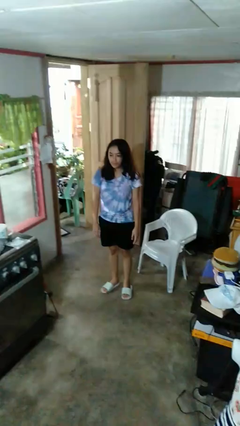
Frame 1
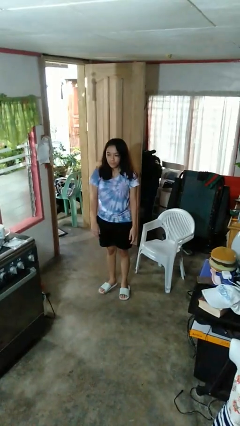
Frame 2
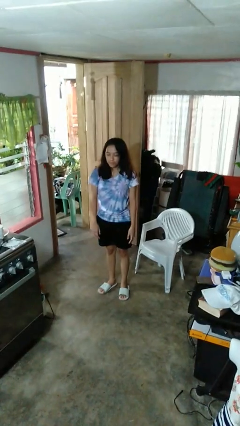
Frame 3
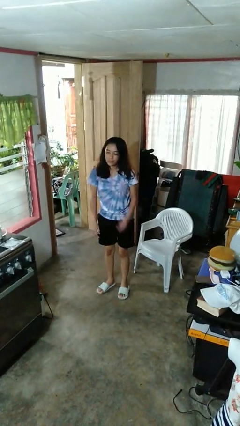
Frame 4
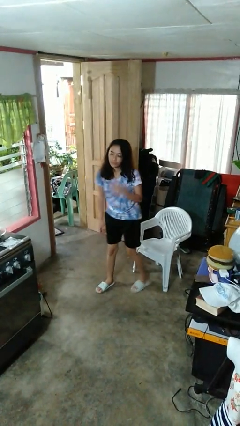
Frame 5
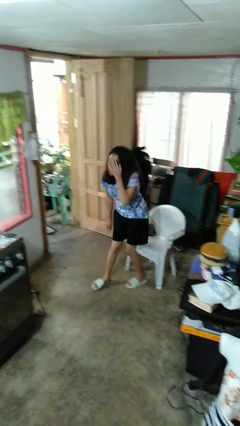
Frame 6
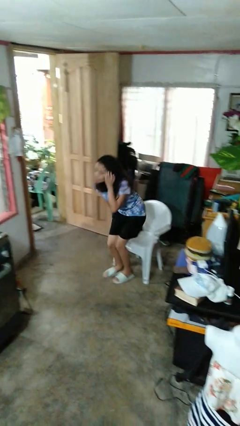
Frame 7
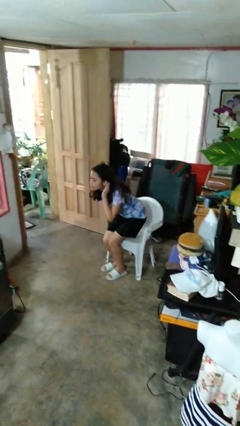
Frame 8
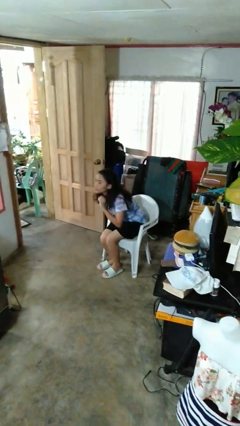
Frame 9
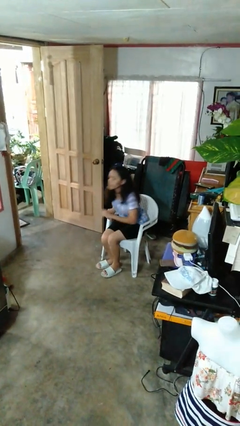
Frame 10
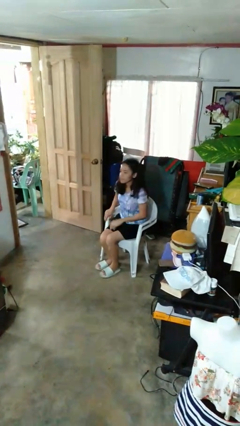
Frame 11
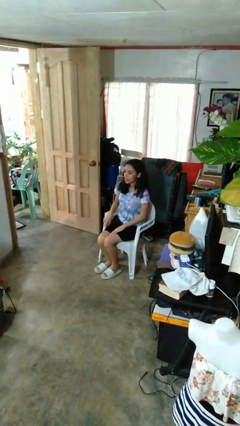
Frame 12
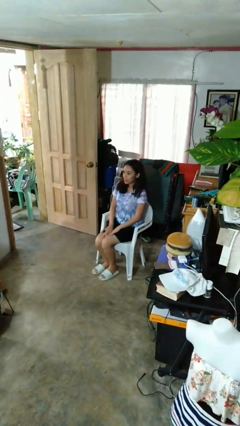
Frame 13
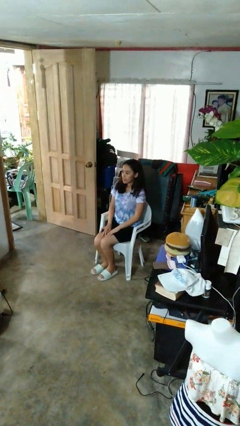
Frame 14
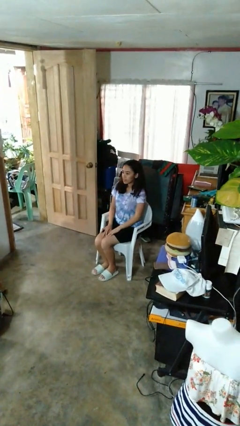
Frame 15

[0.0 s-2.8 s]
person sits down

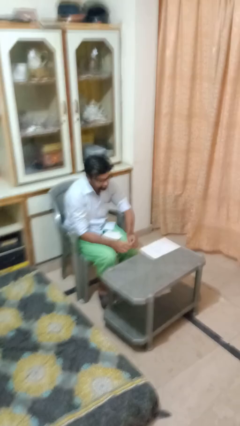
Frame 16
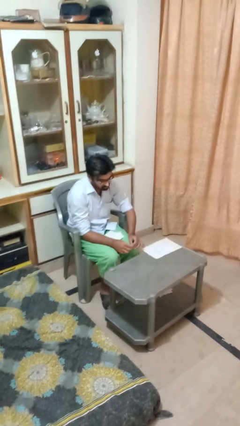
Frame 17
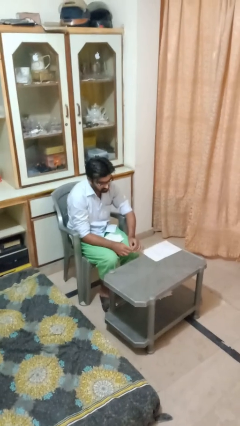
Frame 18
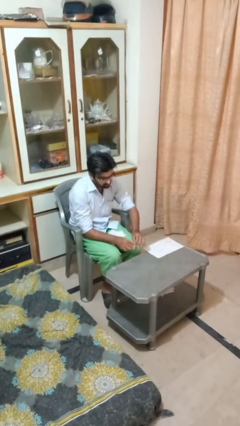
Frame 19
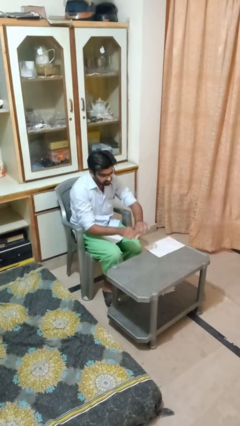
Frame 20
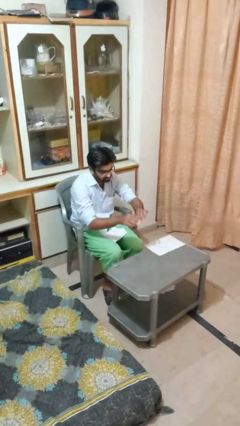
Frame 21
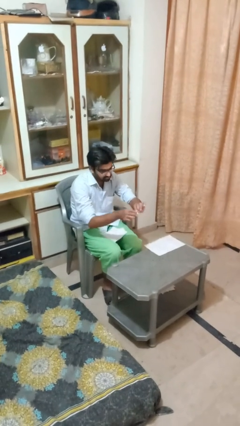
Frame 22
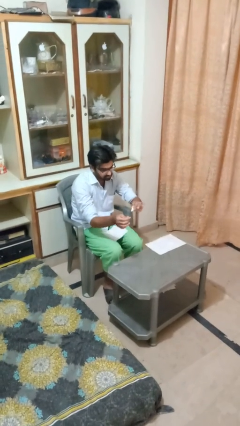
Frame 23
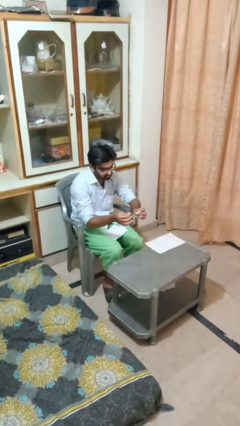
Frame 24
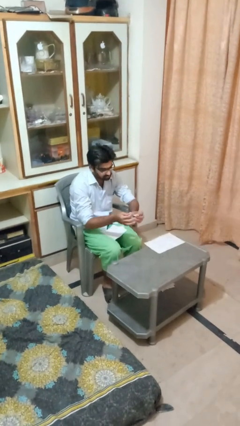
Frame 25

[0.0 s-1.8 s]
person tears paper

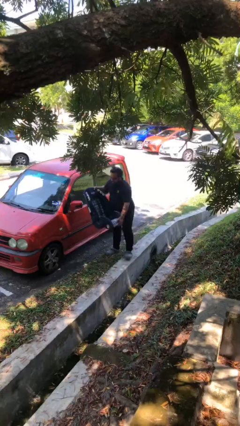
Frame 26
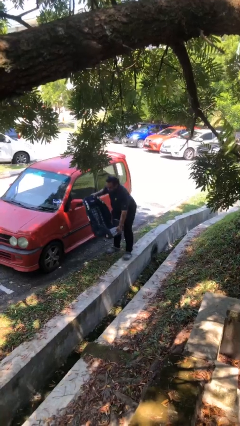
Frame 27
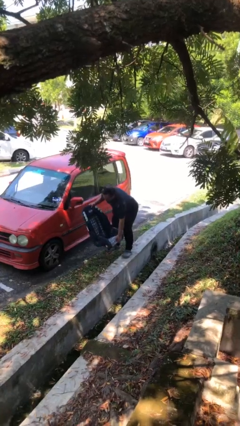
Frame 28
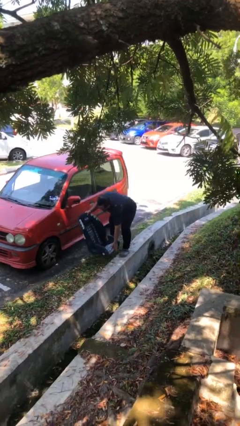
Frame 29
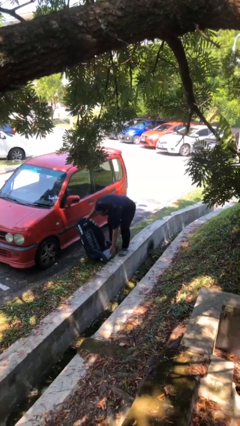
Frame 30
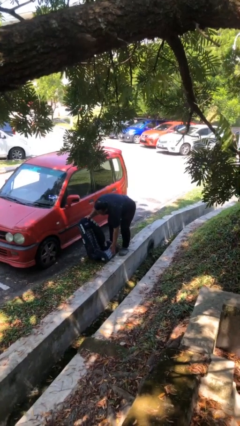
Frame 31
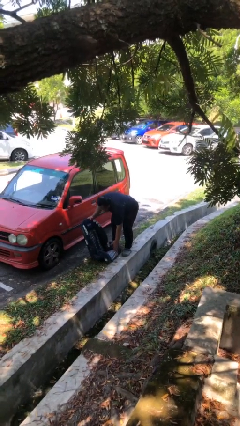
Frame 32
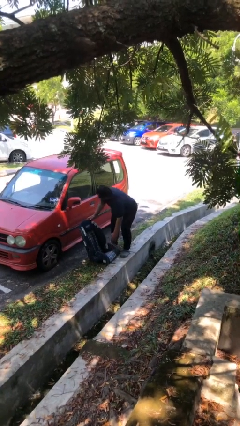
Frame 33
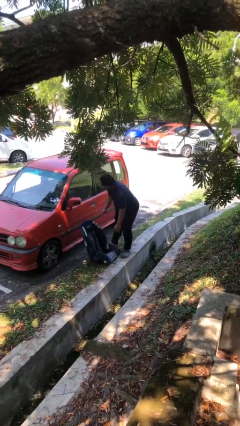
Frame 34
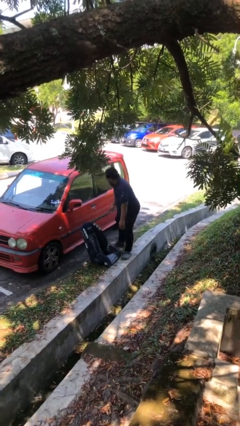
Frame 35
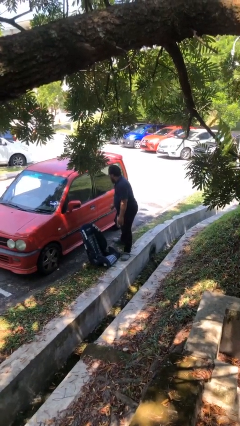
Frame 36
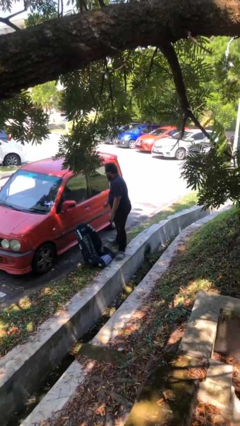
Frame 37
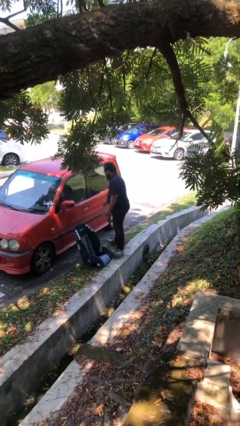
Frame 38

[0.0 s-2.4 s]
person puts down object on floor

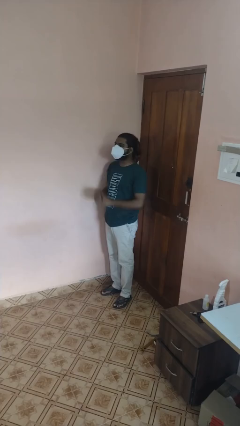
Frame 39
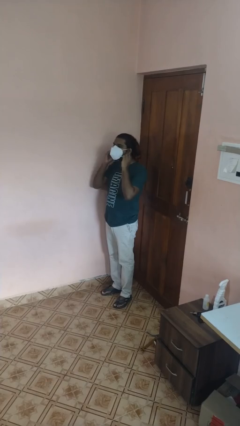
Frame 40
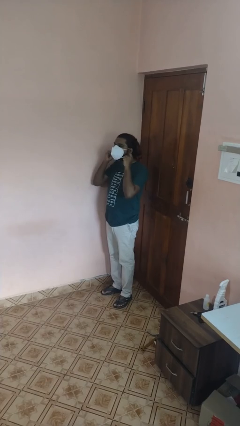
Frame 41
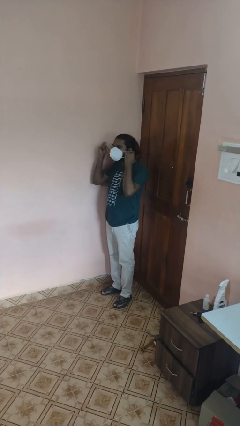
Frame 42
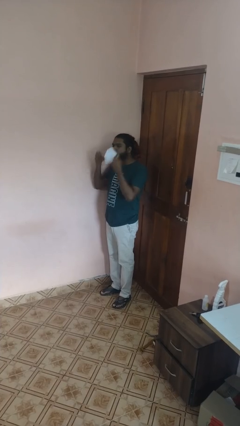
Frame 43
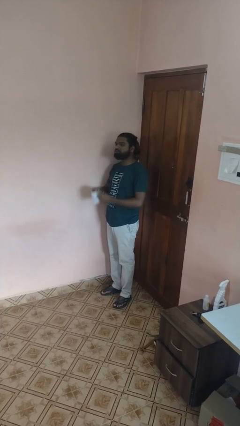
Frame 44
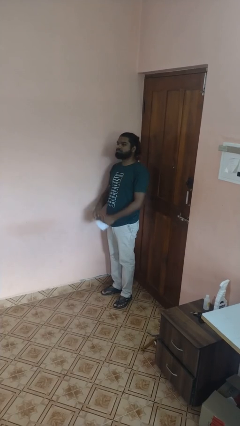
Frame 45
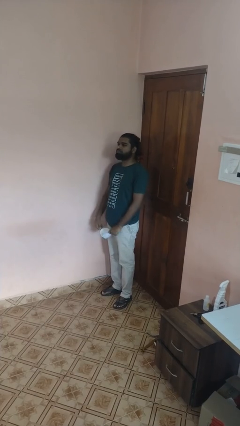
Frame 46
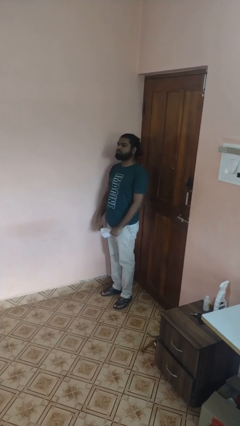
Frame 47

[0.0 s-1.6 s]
person takes off facemask

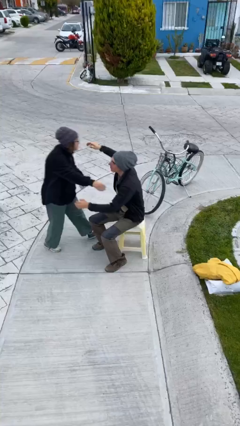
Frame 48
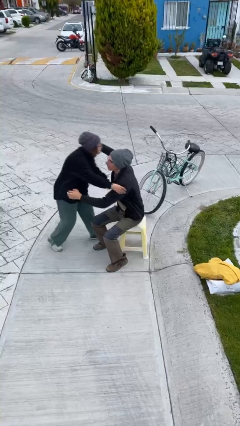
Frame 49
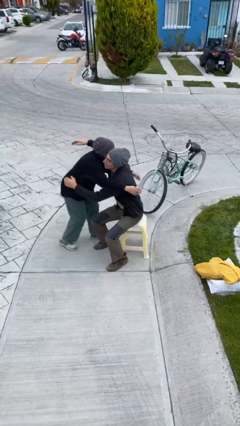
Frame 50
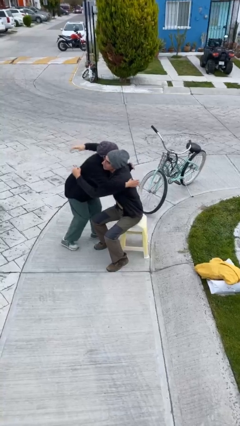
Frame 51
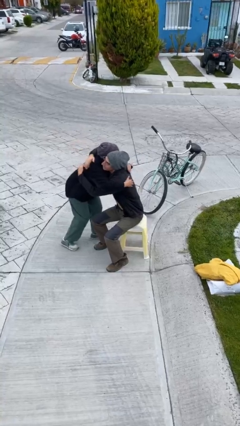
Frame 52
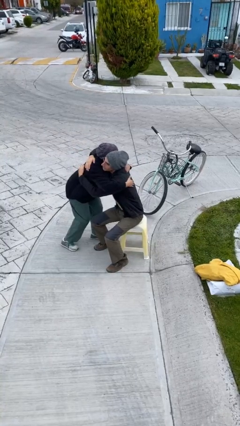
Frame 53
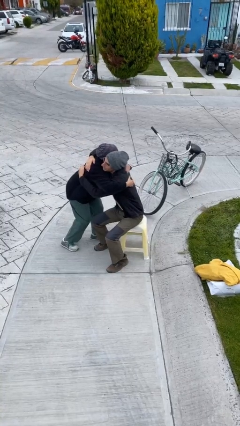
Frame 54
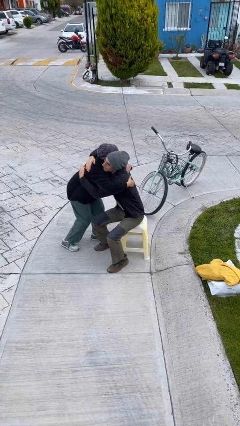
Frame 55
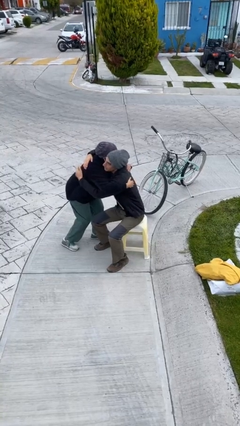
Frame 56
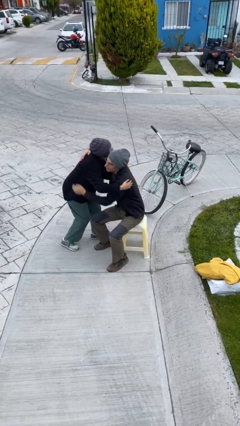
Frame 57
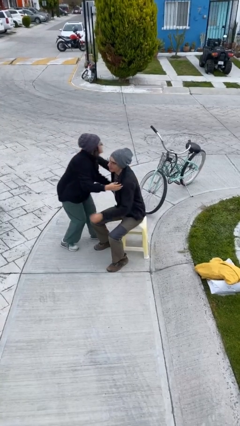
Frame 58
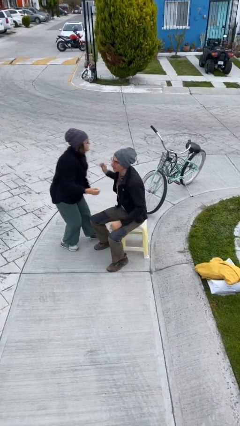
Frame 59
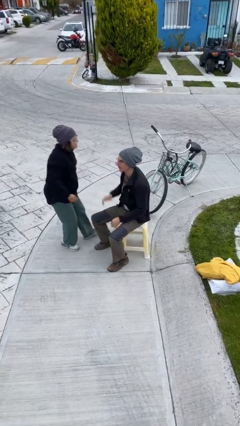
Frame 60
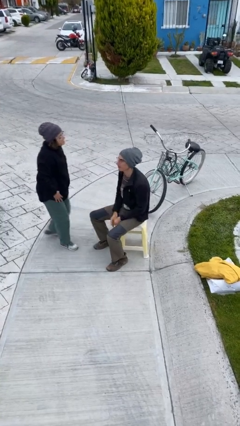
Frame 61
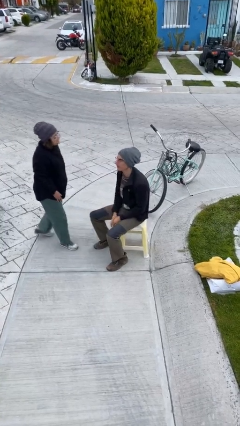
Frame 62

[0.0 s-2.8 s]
person embraces person

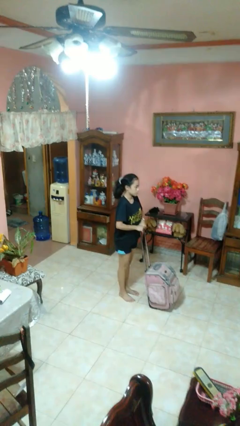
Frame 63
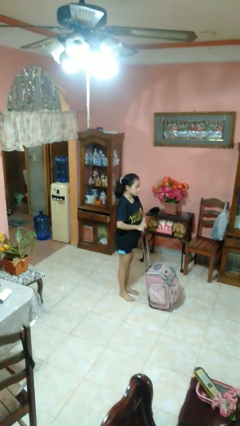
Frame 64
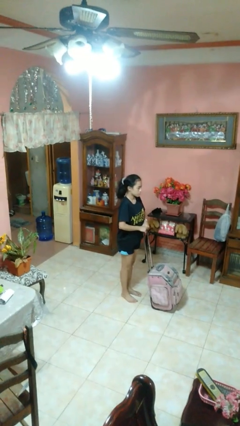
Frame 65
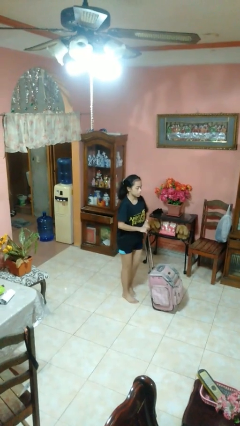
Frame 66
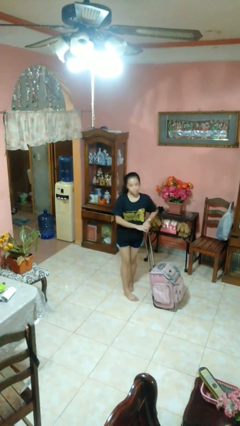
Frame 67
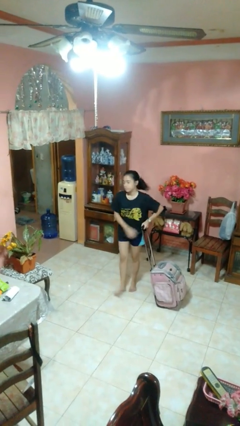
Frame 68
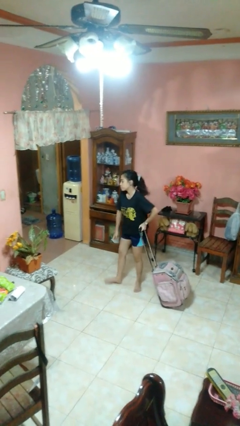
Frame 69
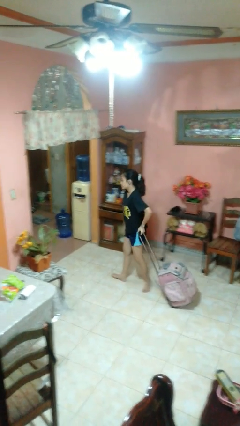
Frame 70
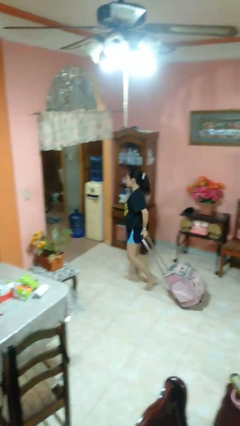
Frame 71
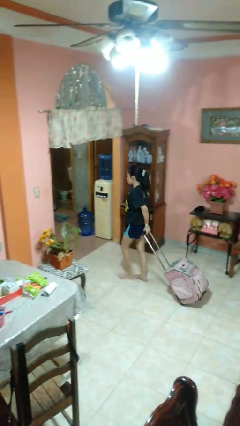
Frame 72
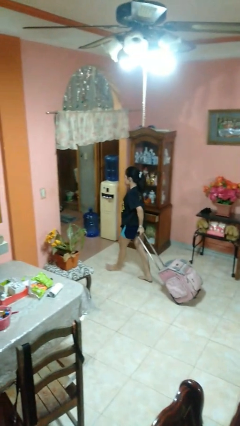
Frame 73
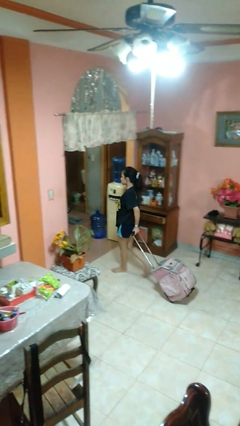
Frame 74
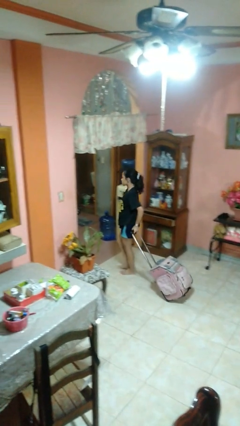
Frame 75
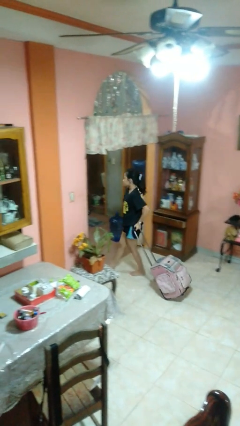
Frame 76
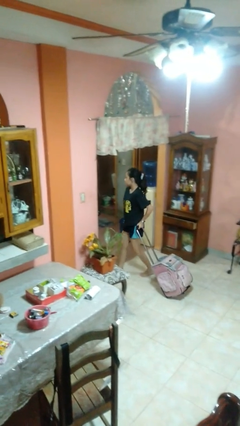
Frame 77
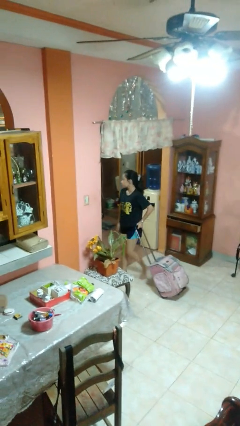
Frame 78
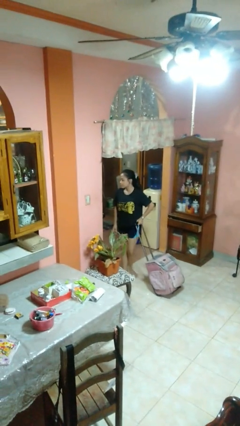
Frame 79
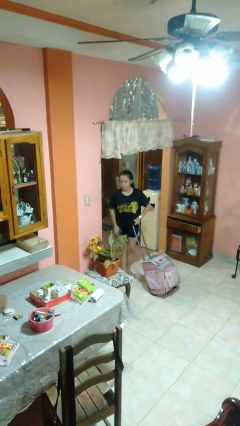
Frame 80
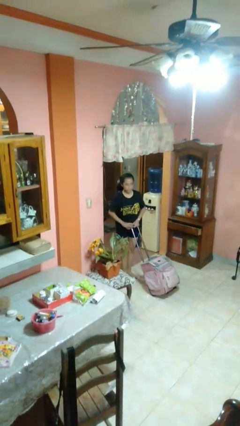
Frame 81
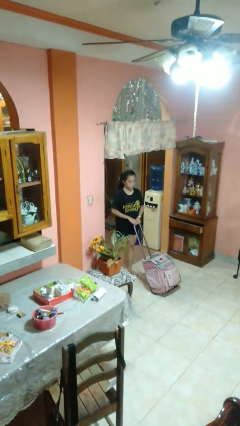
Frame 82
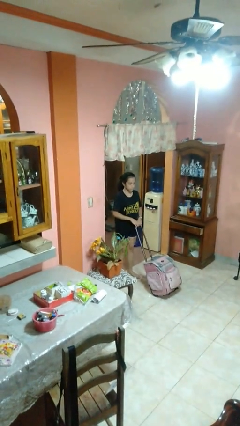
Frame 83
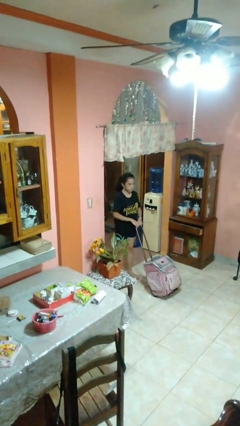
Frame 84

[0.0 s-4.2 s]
person pulls wheeled cart

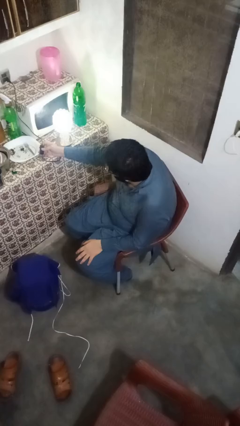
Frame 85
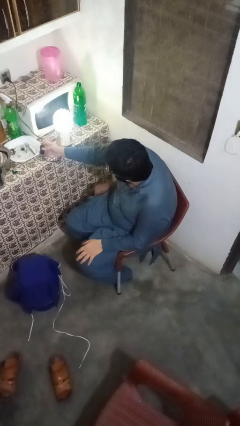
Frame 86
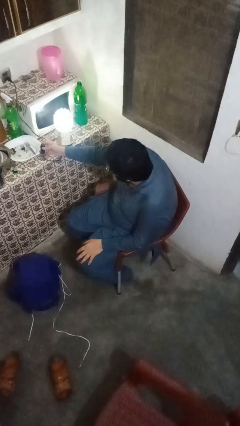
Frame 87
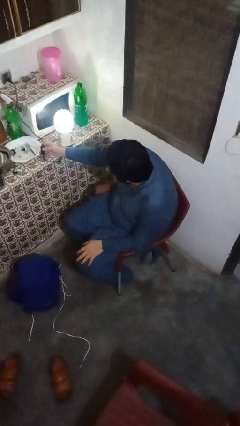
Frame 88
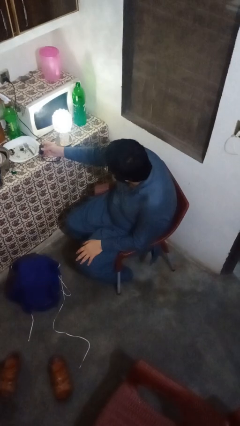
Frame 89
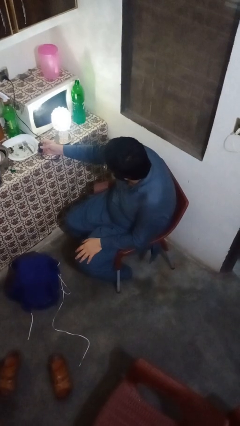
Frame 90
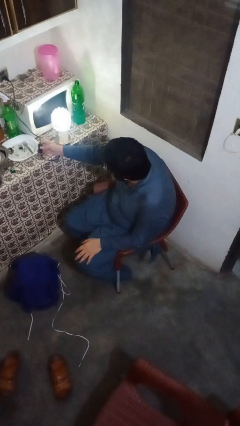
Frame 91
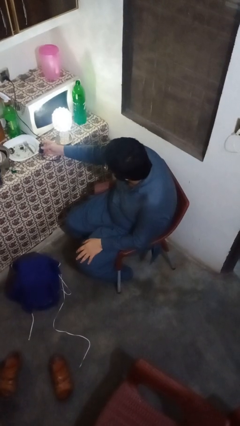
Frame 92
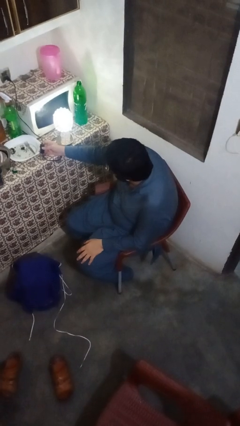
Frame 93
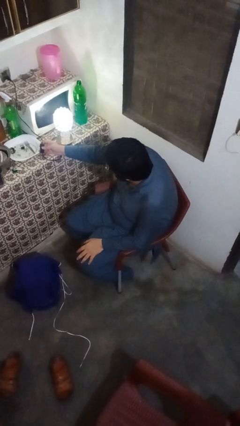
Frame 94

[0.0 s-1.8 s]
person turns on lamp
